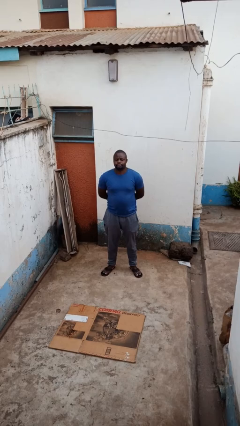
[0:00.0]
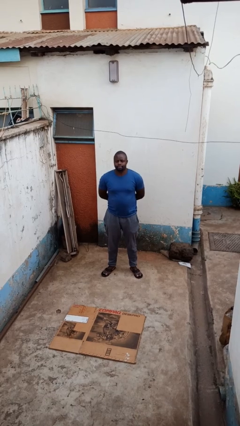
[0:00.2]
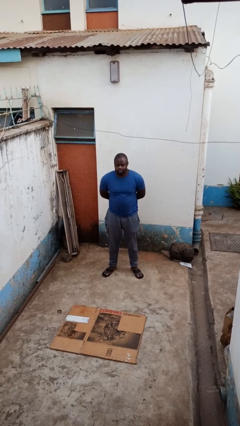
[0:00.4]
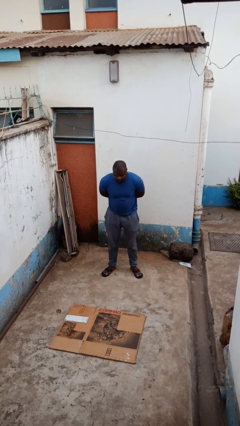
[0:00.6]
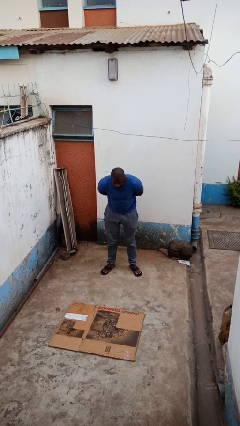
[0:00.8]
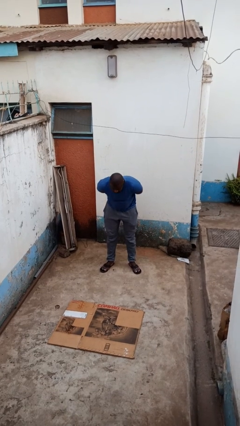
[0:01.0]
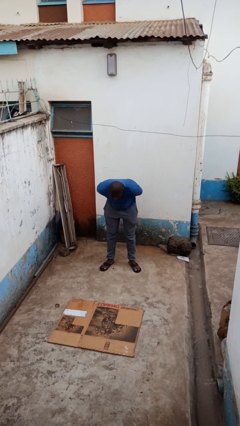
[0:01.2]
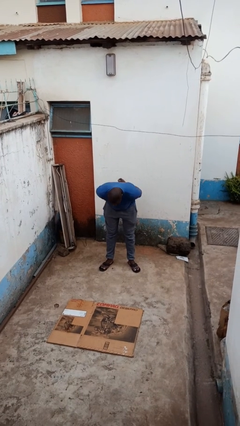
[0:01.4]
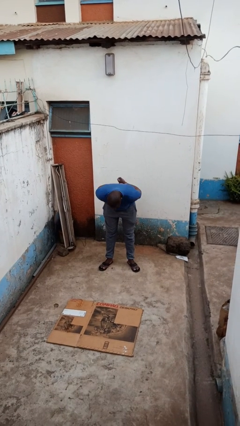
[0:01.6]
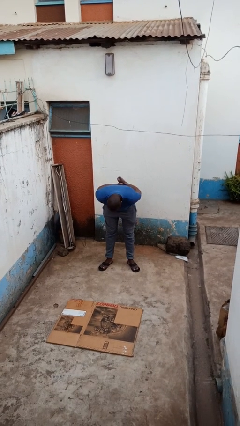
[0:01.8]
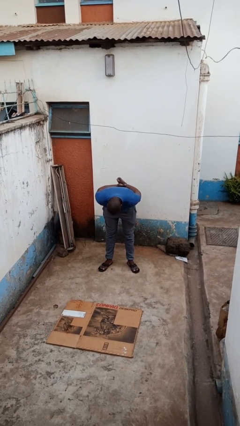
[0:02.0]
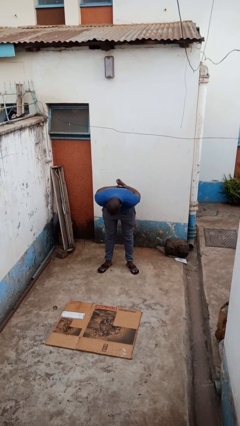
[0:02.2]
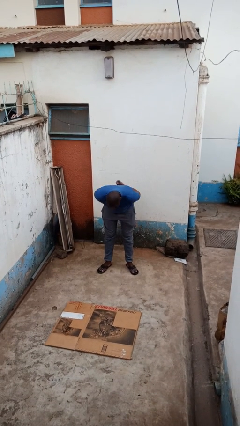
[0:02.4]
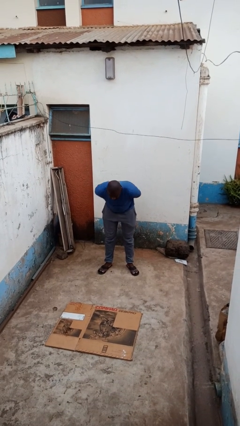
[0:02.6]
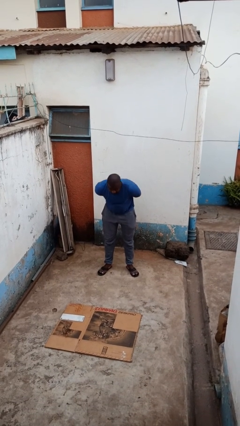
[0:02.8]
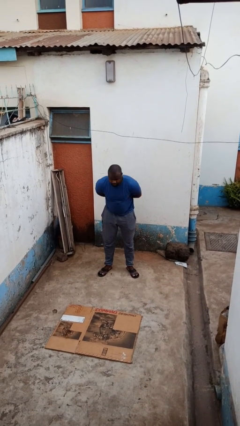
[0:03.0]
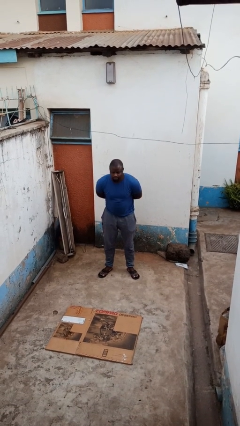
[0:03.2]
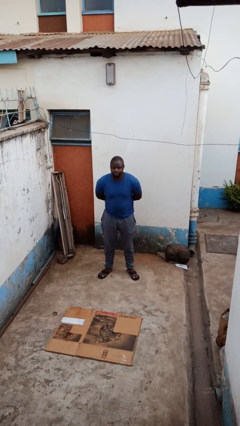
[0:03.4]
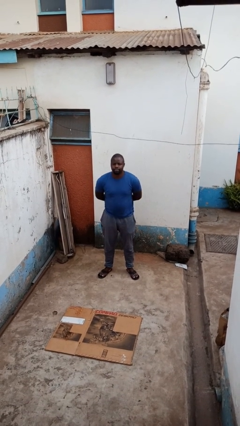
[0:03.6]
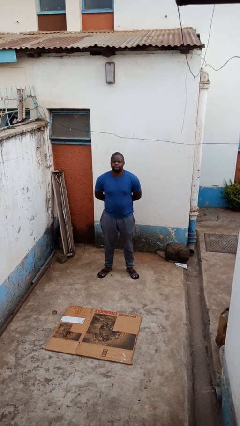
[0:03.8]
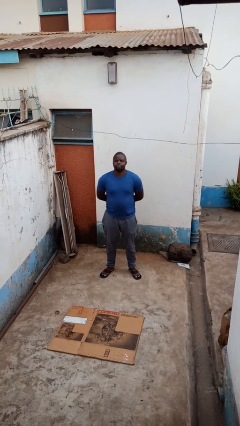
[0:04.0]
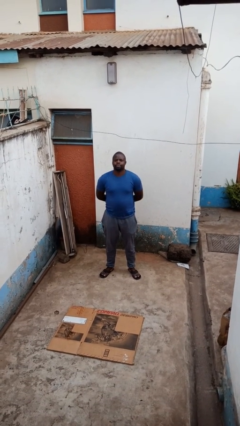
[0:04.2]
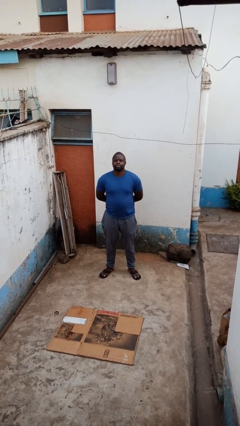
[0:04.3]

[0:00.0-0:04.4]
person bows

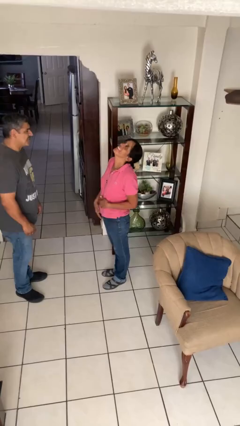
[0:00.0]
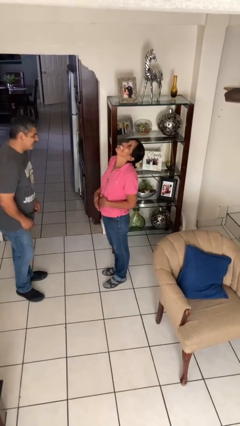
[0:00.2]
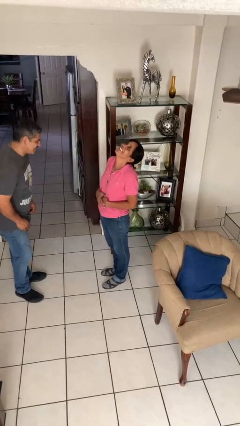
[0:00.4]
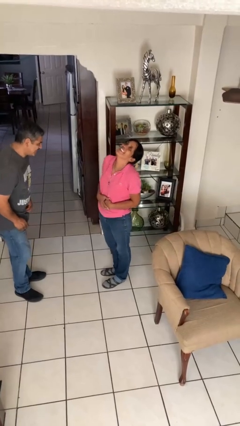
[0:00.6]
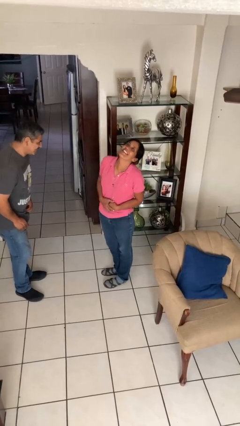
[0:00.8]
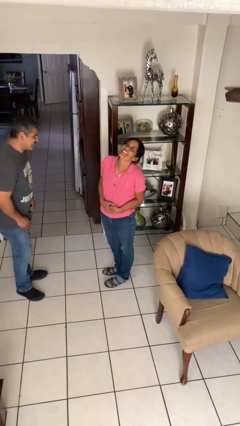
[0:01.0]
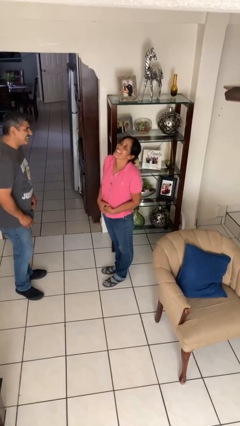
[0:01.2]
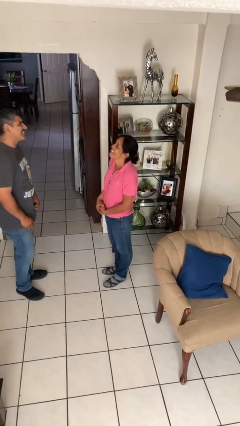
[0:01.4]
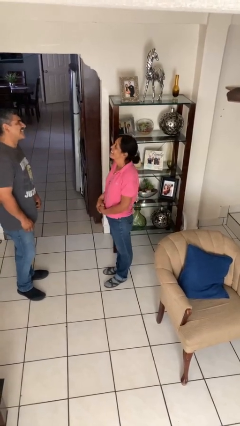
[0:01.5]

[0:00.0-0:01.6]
person laughs with person

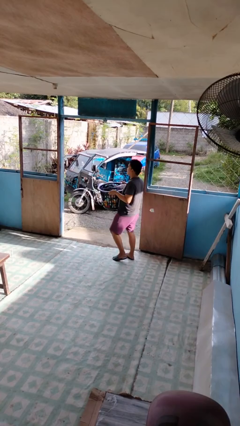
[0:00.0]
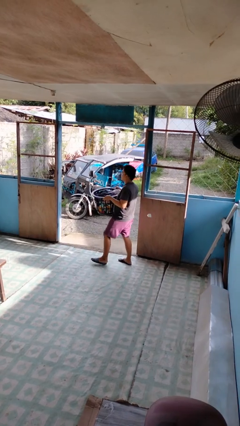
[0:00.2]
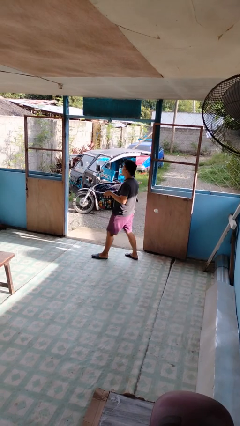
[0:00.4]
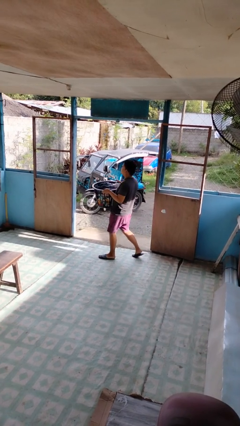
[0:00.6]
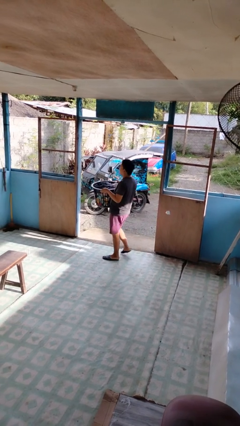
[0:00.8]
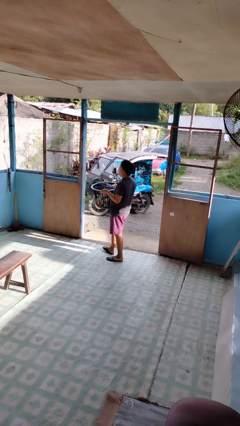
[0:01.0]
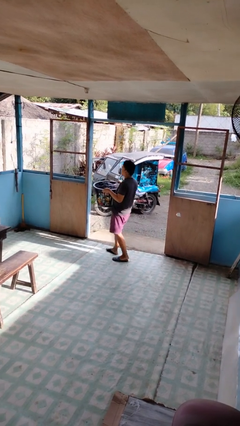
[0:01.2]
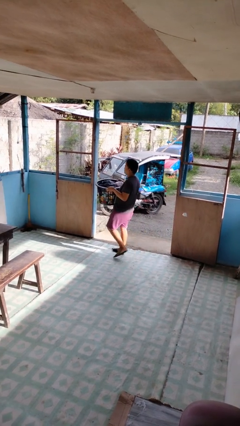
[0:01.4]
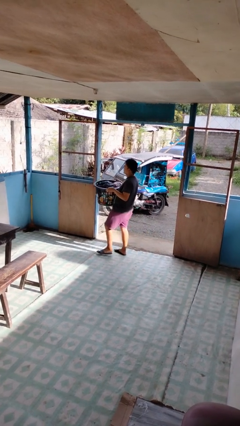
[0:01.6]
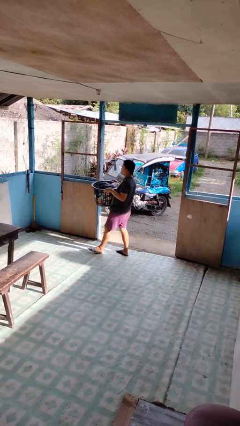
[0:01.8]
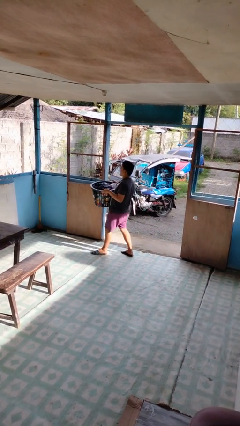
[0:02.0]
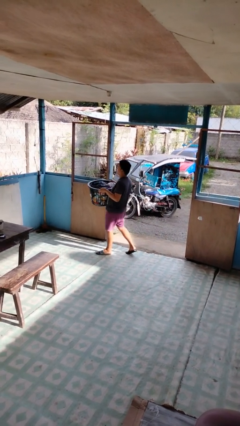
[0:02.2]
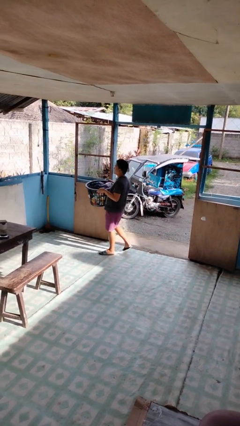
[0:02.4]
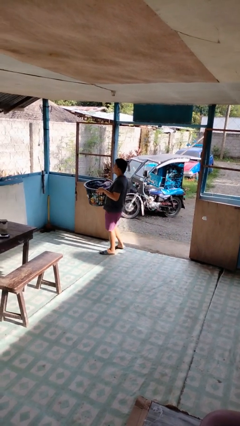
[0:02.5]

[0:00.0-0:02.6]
person carries laundry basket

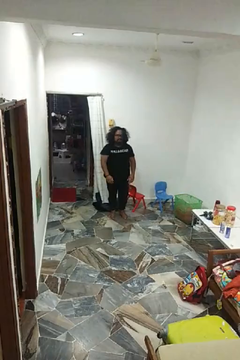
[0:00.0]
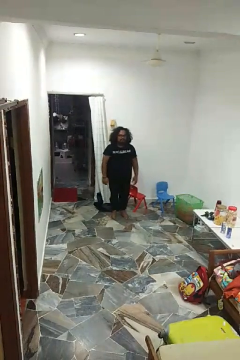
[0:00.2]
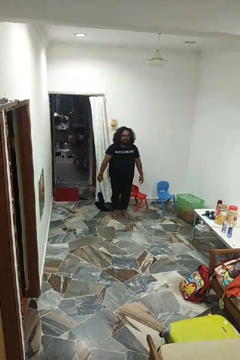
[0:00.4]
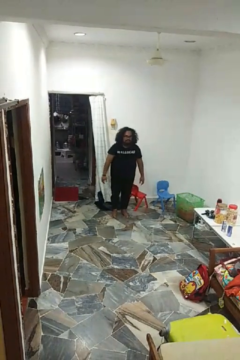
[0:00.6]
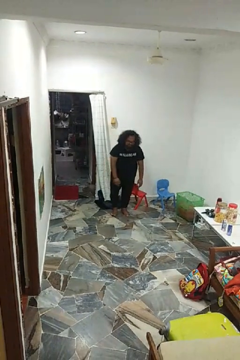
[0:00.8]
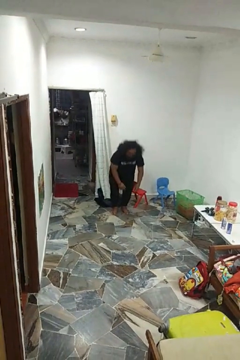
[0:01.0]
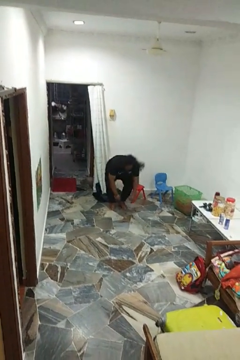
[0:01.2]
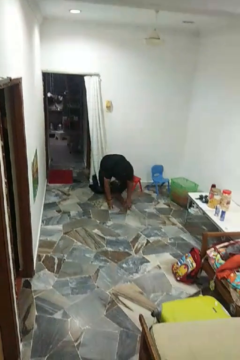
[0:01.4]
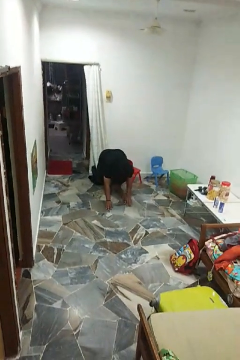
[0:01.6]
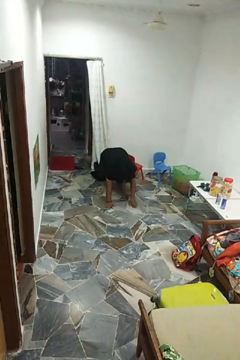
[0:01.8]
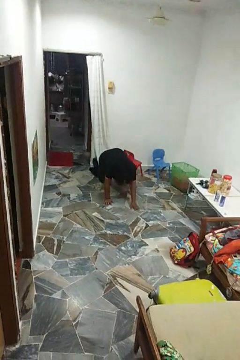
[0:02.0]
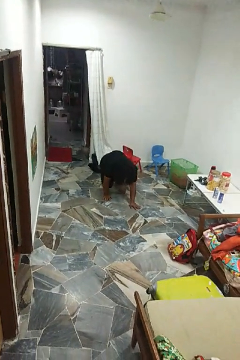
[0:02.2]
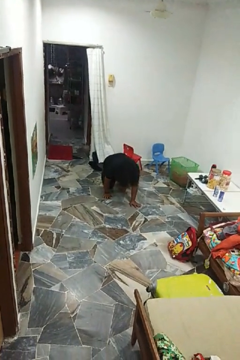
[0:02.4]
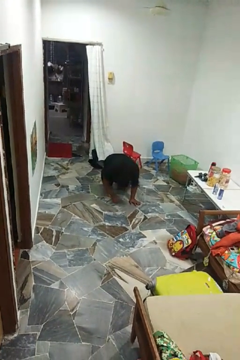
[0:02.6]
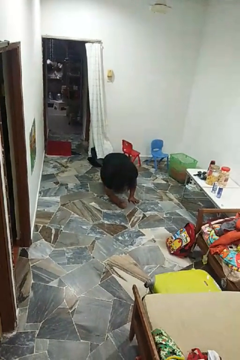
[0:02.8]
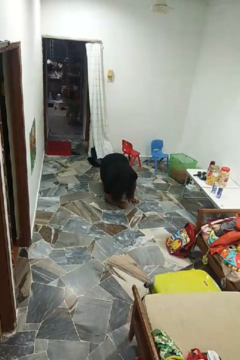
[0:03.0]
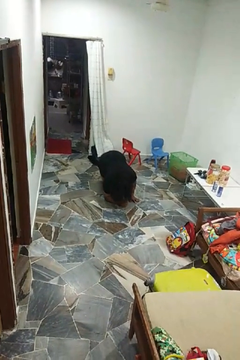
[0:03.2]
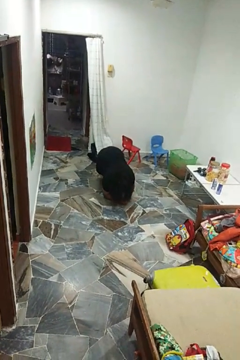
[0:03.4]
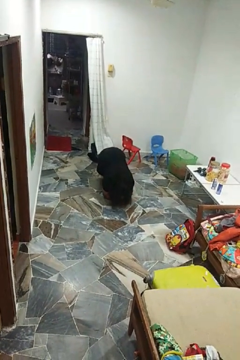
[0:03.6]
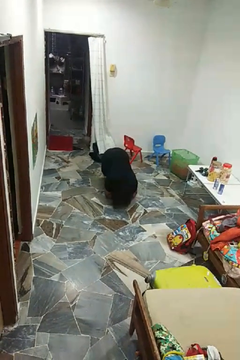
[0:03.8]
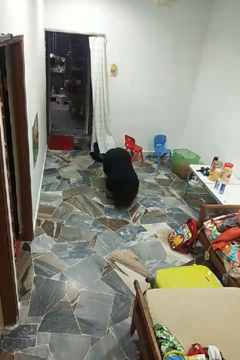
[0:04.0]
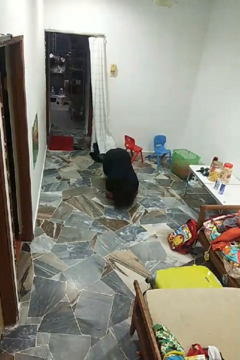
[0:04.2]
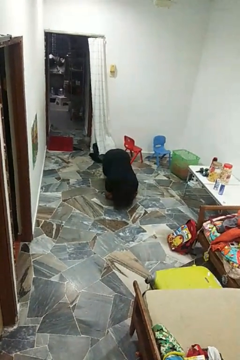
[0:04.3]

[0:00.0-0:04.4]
person exercises with plank

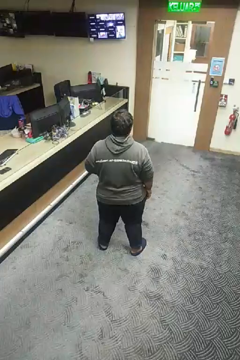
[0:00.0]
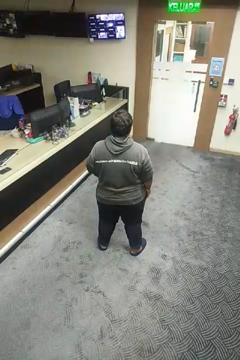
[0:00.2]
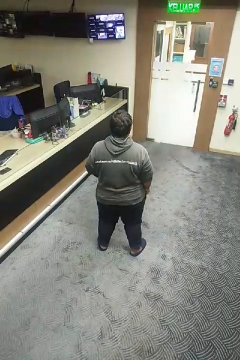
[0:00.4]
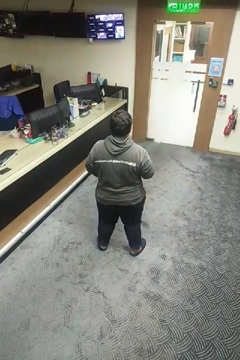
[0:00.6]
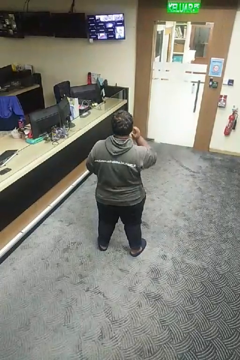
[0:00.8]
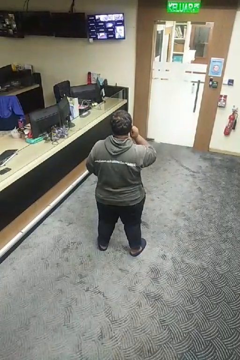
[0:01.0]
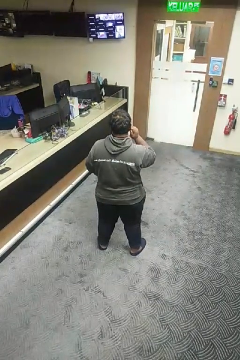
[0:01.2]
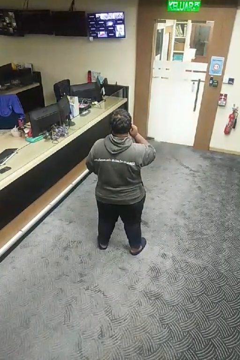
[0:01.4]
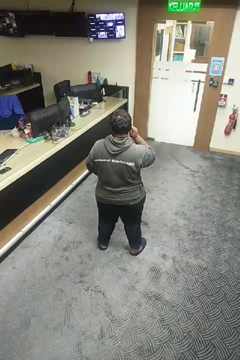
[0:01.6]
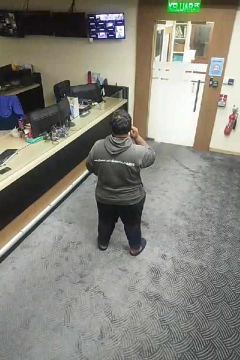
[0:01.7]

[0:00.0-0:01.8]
person touches earlobe

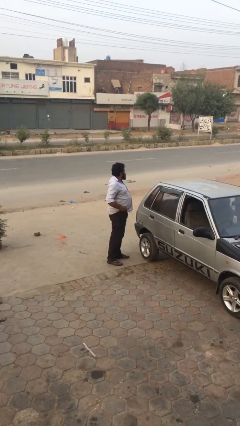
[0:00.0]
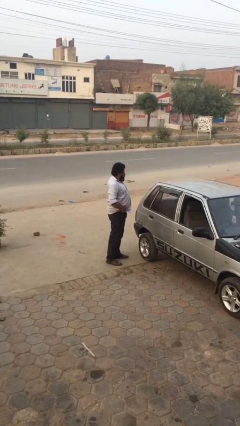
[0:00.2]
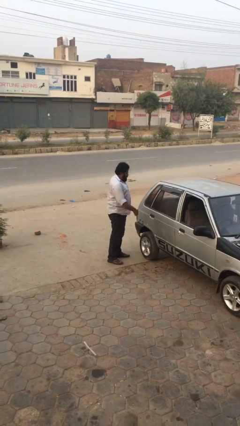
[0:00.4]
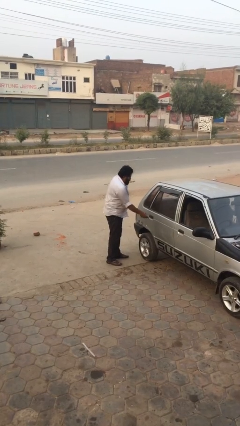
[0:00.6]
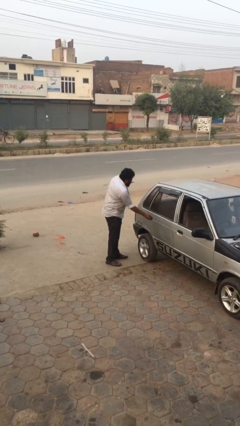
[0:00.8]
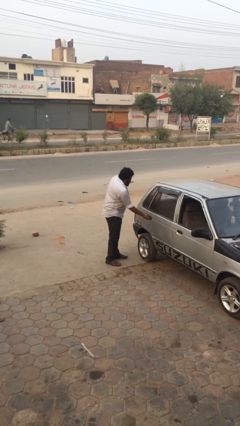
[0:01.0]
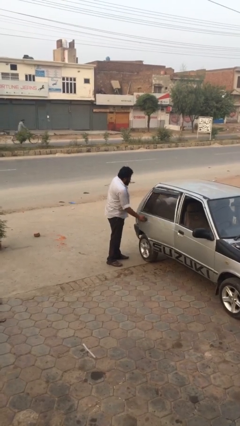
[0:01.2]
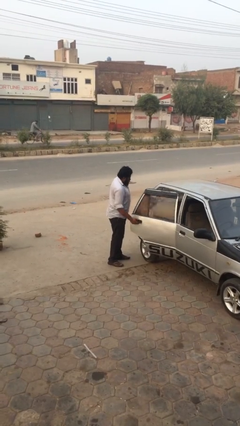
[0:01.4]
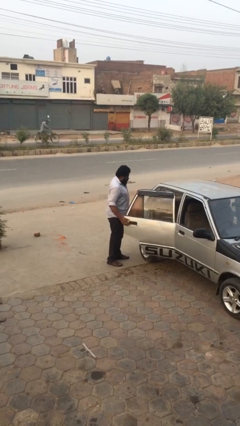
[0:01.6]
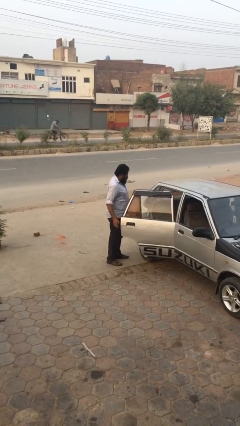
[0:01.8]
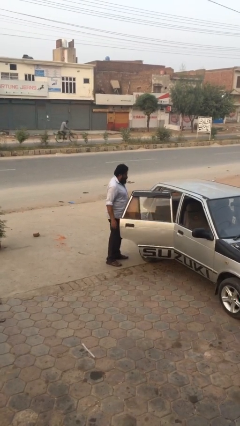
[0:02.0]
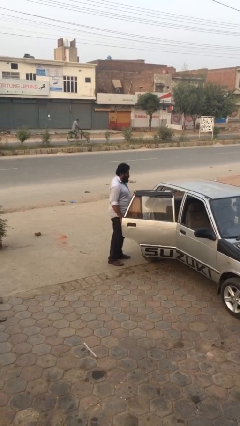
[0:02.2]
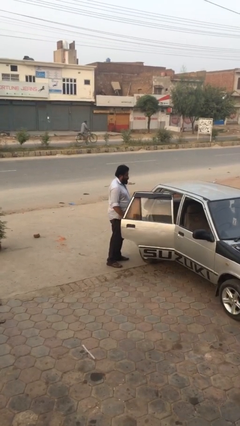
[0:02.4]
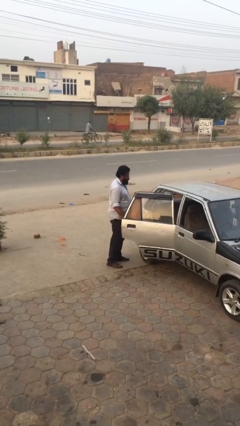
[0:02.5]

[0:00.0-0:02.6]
person opens car door

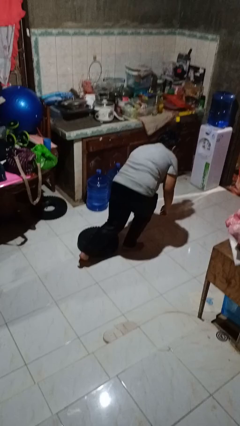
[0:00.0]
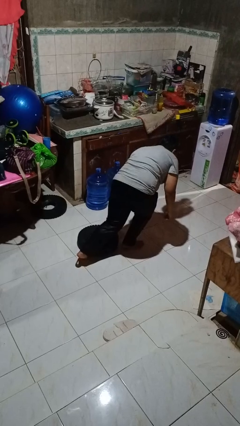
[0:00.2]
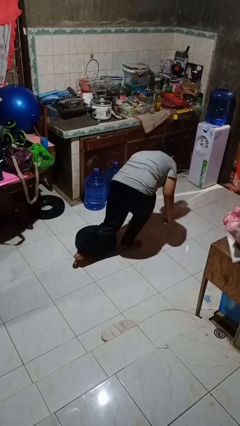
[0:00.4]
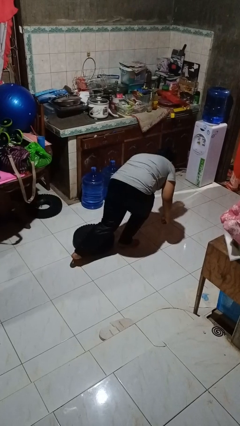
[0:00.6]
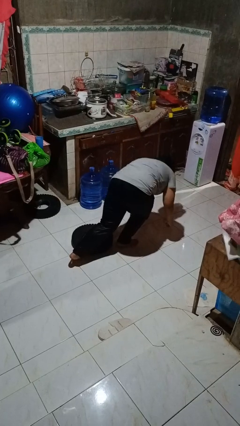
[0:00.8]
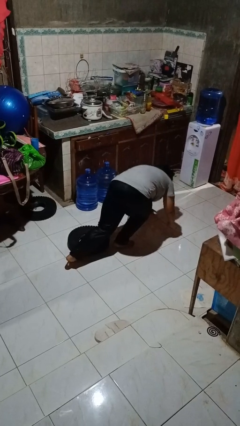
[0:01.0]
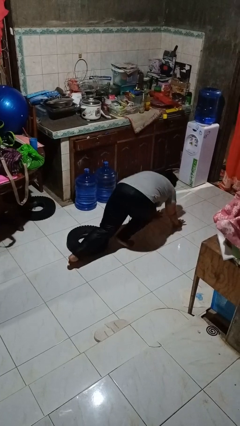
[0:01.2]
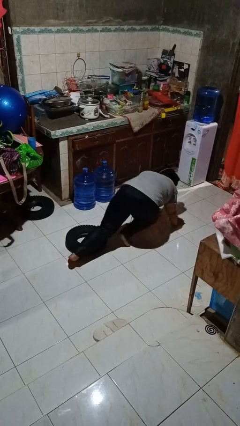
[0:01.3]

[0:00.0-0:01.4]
person trips on object on floor
